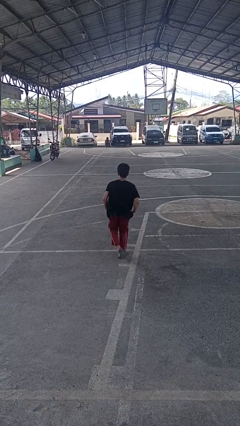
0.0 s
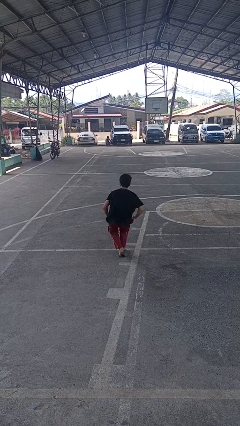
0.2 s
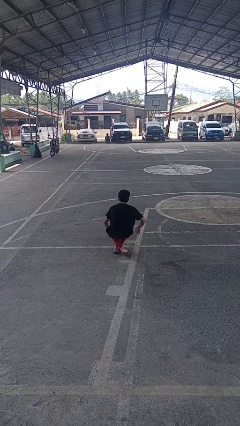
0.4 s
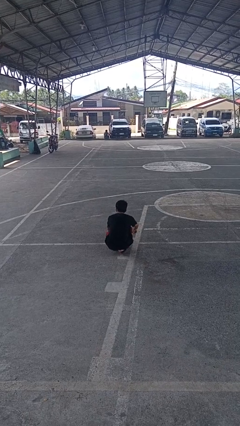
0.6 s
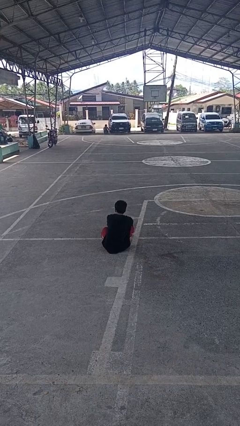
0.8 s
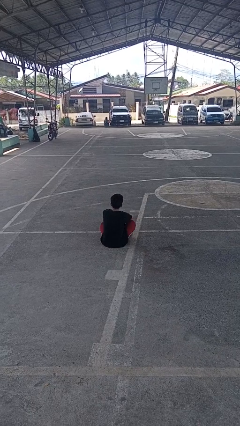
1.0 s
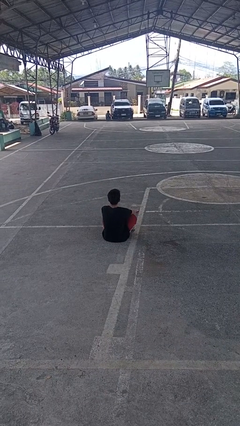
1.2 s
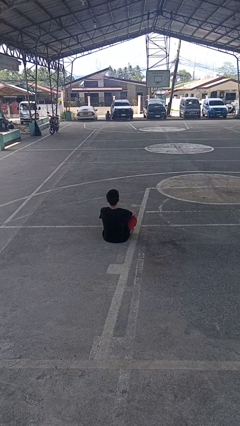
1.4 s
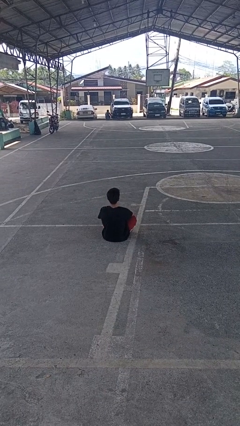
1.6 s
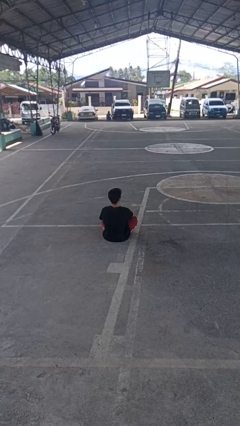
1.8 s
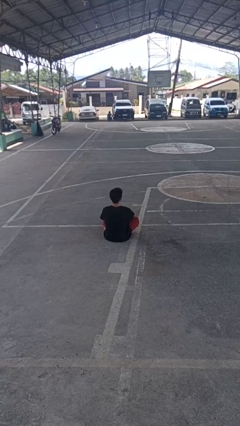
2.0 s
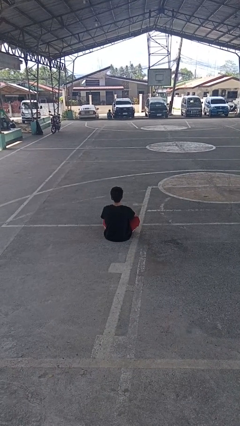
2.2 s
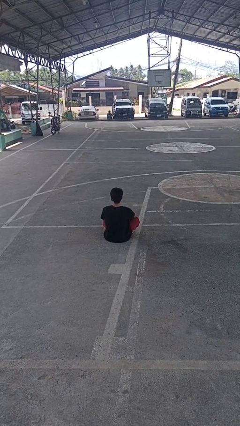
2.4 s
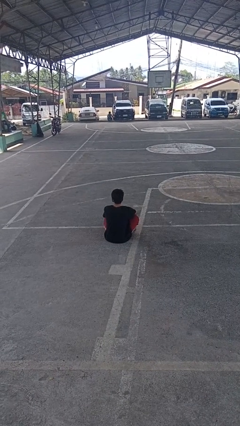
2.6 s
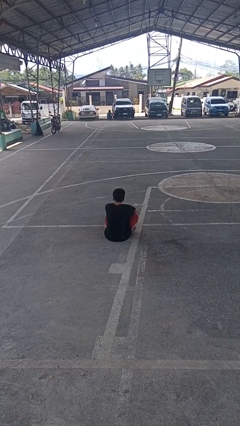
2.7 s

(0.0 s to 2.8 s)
person sits crisscross

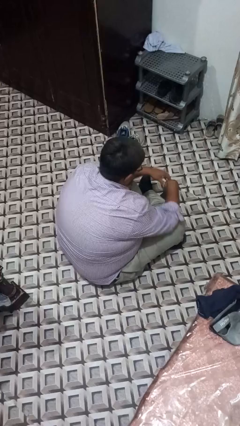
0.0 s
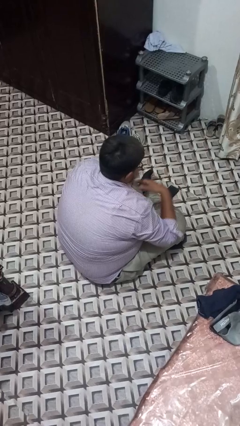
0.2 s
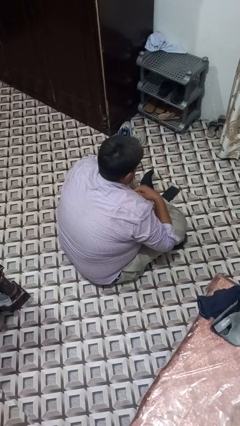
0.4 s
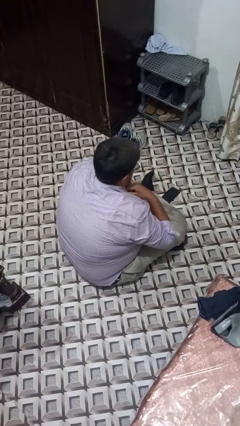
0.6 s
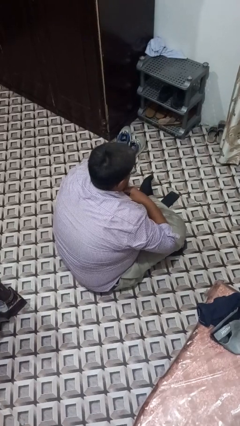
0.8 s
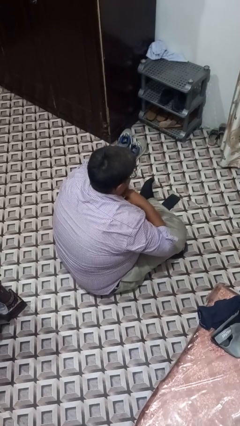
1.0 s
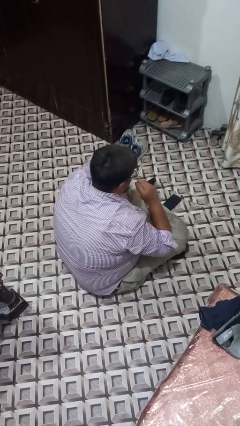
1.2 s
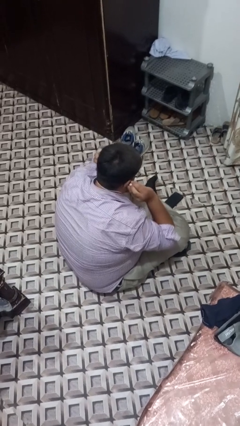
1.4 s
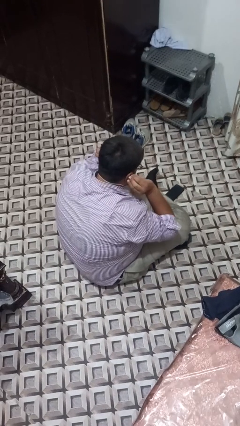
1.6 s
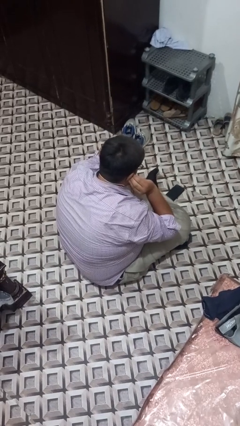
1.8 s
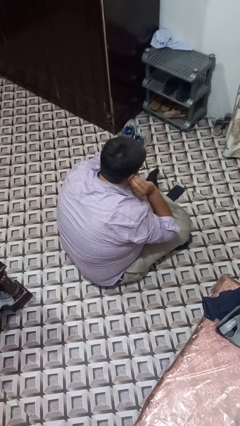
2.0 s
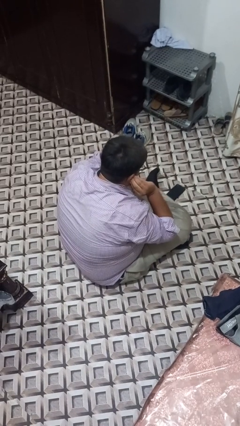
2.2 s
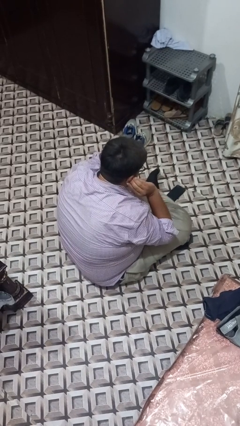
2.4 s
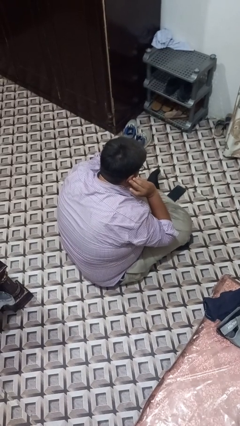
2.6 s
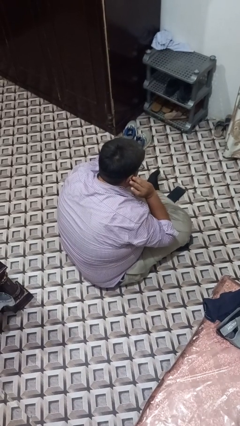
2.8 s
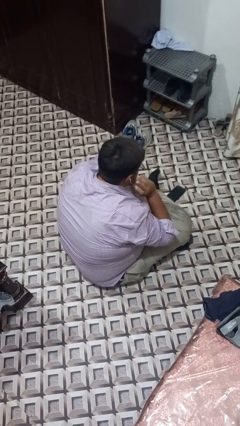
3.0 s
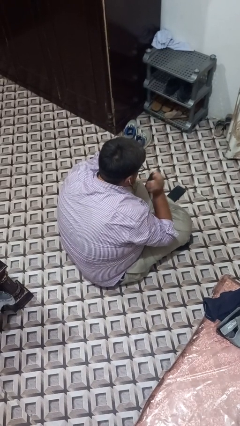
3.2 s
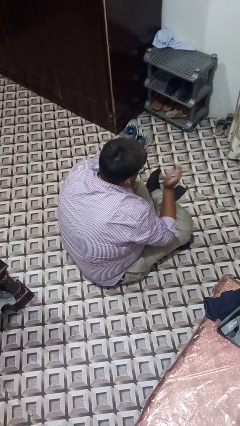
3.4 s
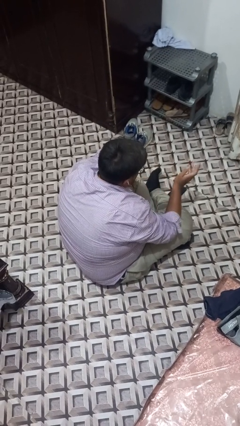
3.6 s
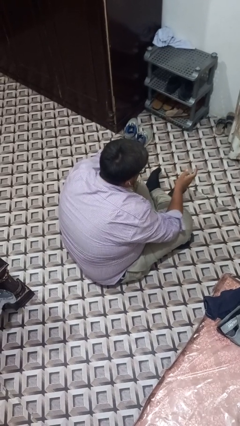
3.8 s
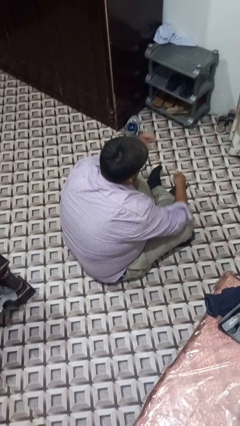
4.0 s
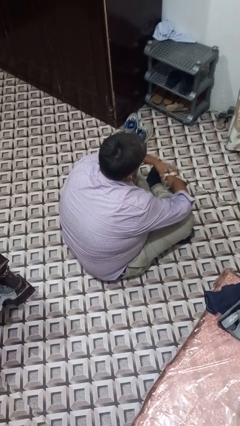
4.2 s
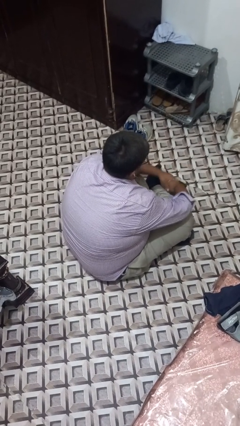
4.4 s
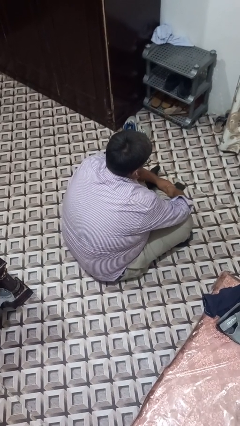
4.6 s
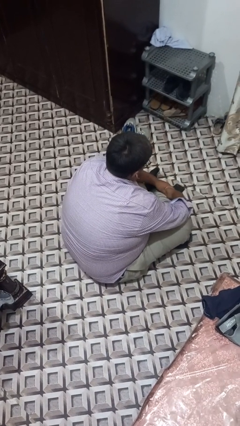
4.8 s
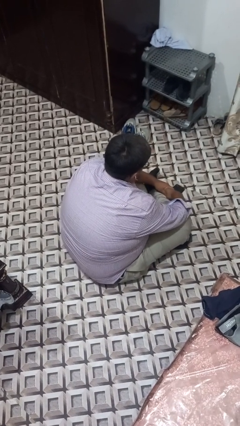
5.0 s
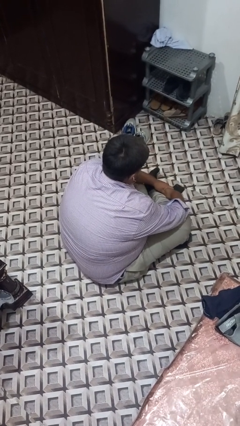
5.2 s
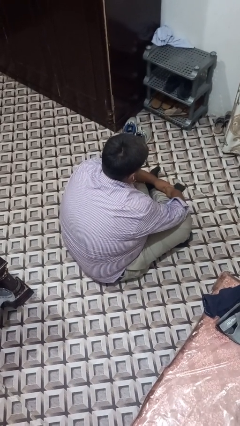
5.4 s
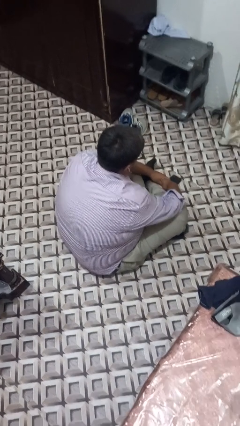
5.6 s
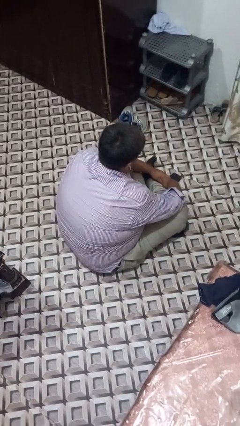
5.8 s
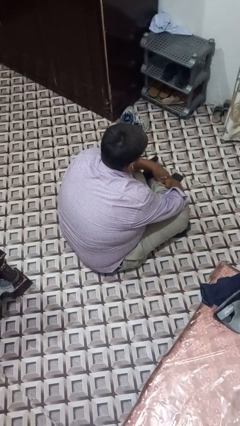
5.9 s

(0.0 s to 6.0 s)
person puts on headphones

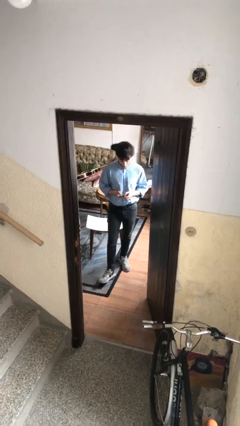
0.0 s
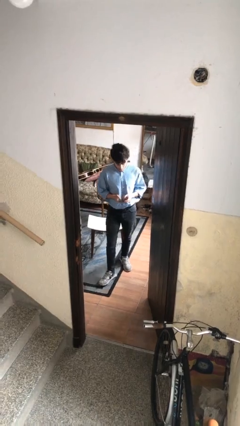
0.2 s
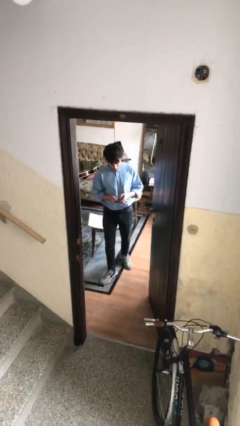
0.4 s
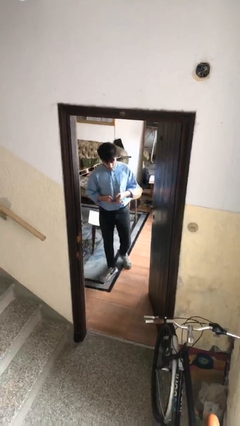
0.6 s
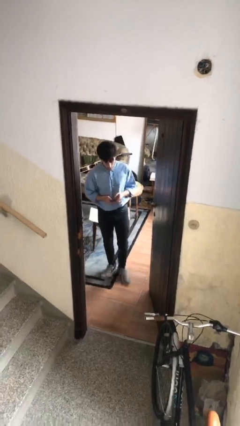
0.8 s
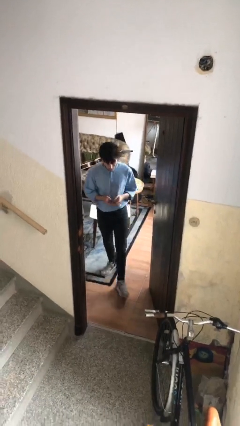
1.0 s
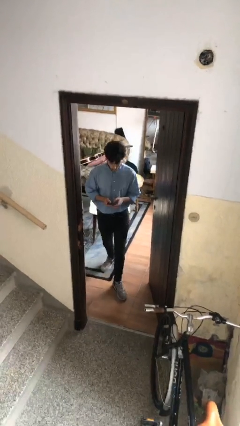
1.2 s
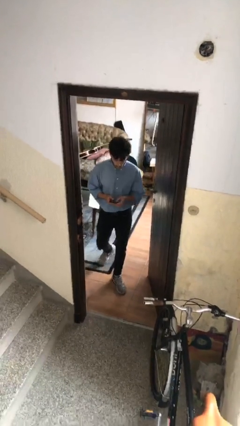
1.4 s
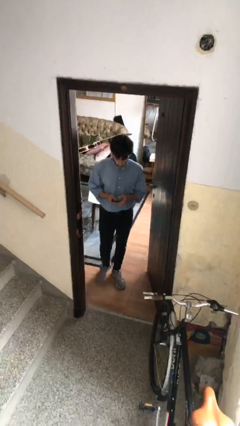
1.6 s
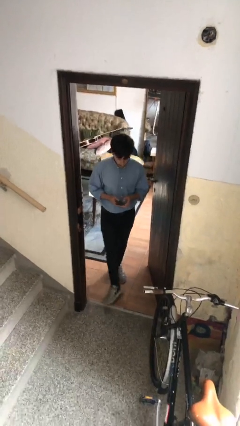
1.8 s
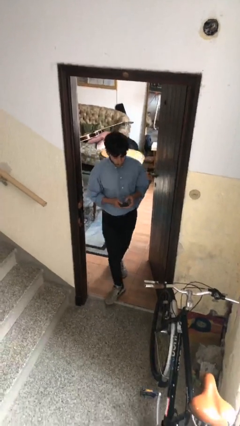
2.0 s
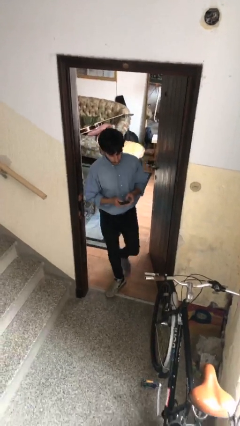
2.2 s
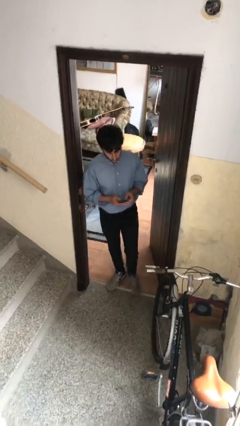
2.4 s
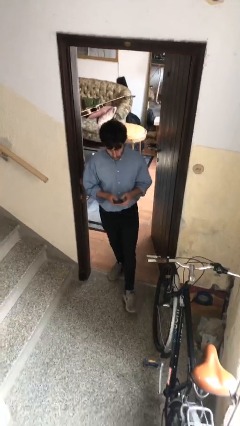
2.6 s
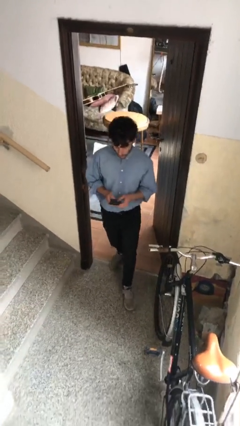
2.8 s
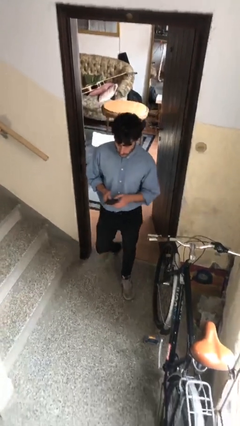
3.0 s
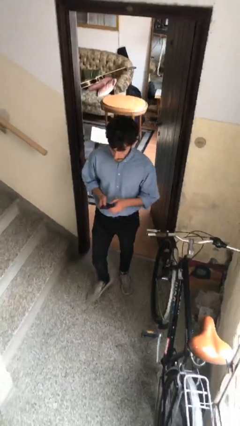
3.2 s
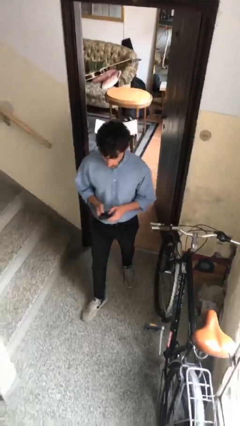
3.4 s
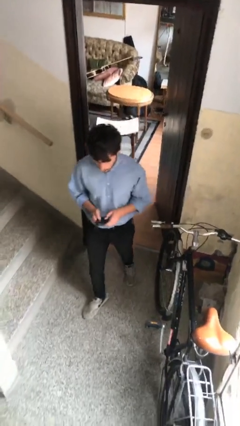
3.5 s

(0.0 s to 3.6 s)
person enters scene through structure

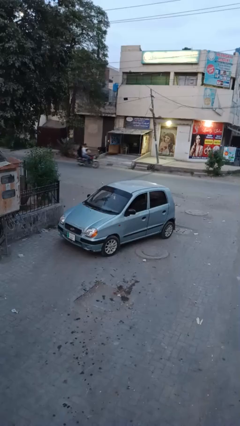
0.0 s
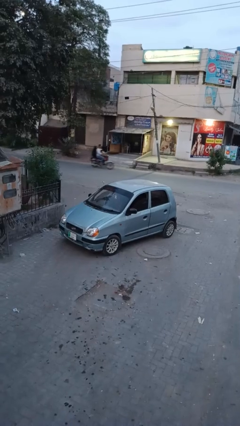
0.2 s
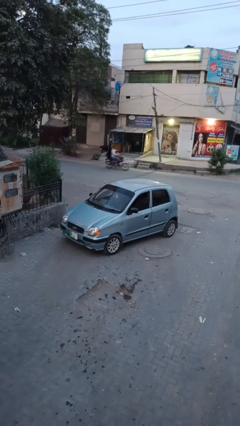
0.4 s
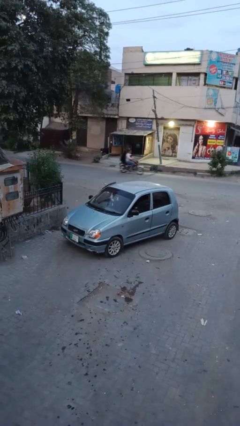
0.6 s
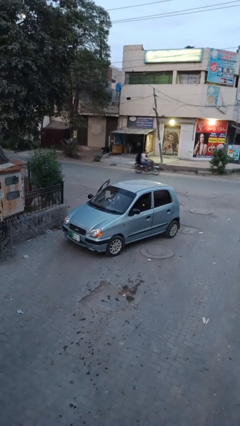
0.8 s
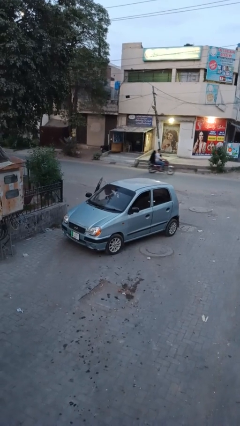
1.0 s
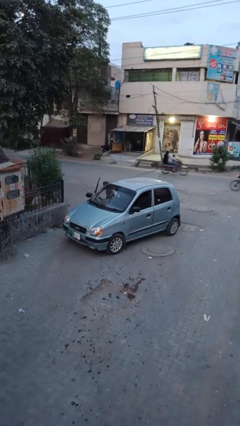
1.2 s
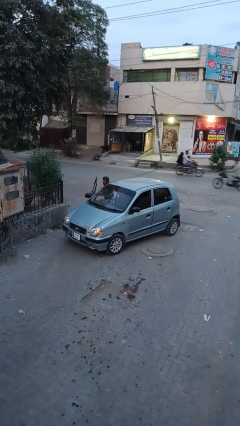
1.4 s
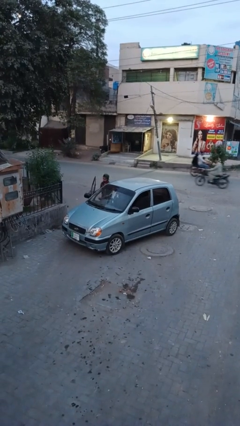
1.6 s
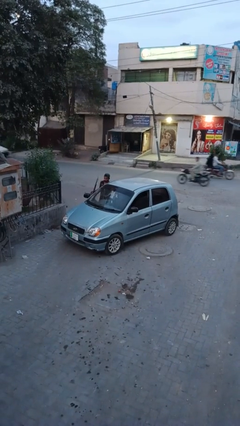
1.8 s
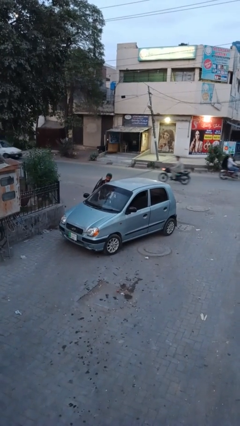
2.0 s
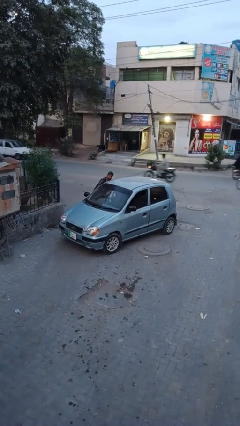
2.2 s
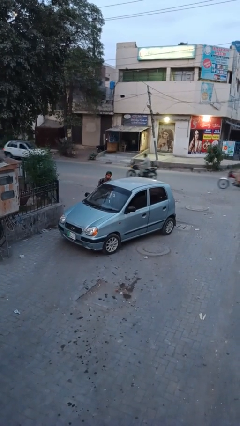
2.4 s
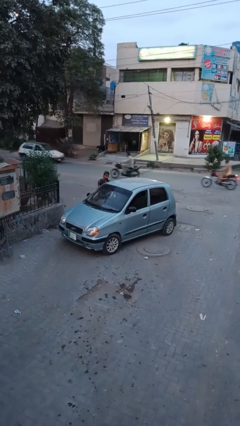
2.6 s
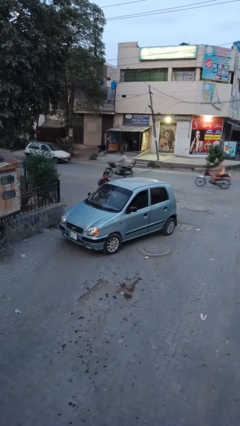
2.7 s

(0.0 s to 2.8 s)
car drops off person

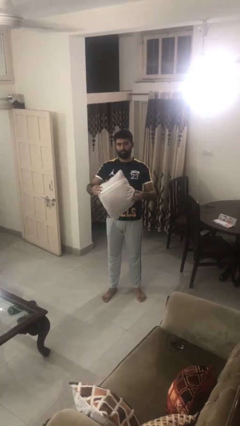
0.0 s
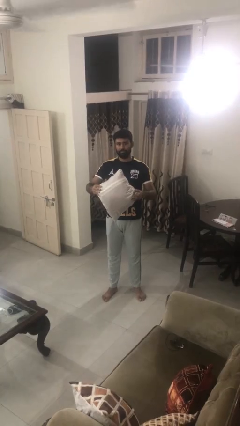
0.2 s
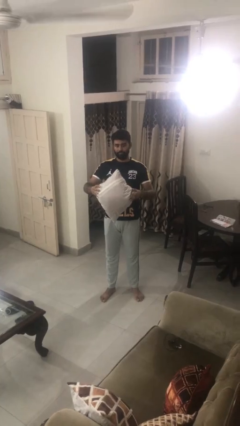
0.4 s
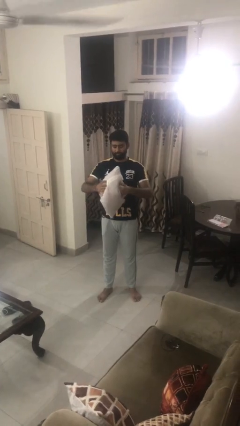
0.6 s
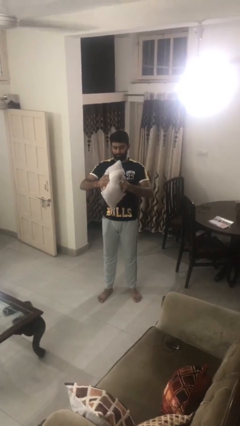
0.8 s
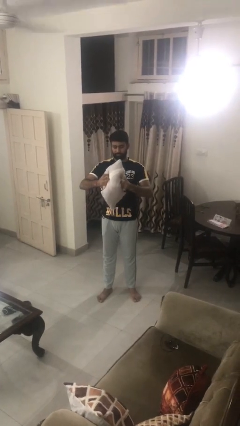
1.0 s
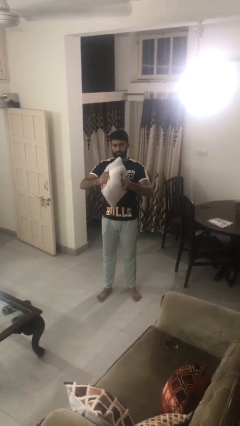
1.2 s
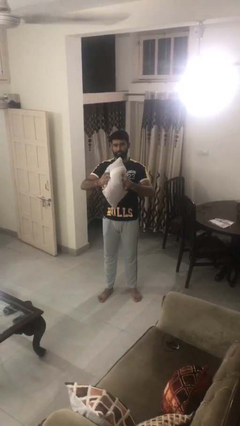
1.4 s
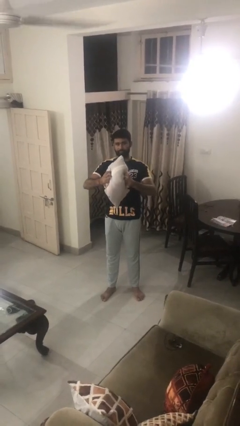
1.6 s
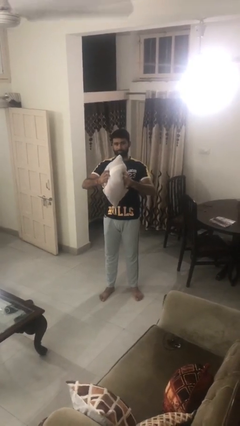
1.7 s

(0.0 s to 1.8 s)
person squeezes object

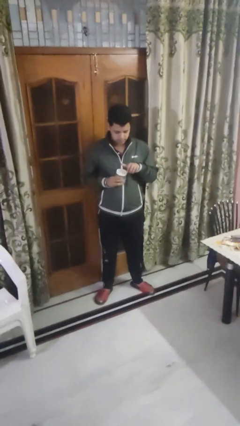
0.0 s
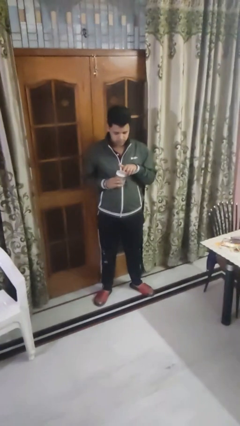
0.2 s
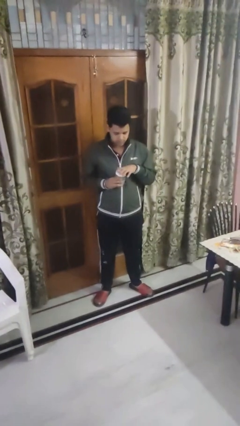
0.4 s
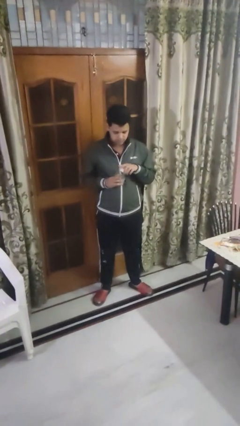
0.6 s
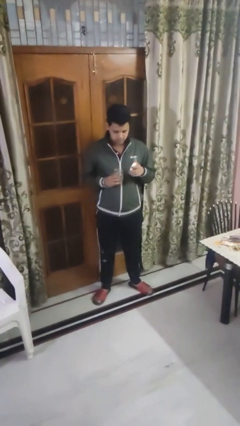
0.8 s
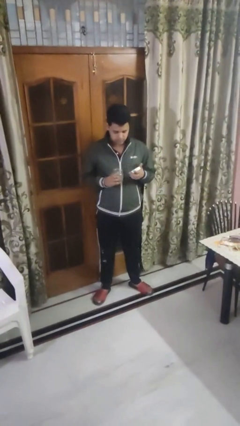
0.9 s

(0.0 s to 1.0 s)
person opens jar
